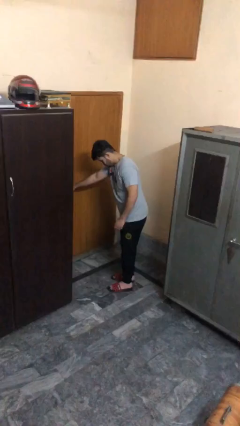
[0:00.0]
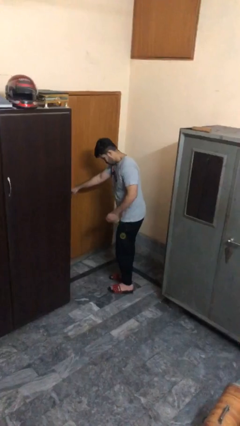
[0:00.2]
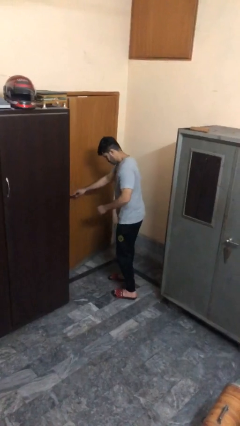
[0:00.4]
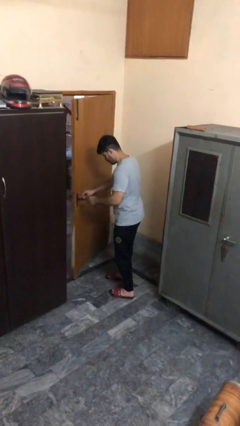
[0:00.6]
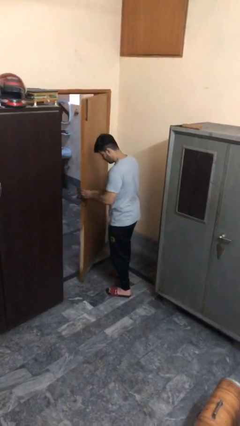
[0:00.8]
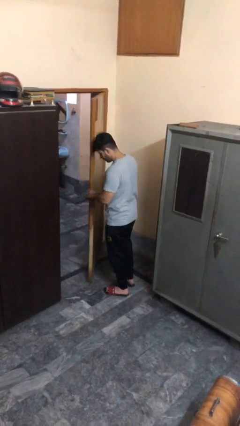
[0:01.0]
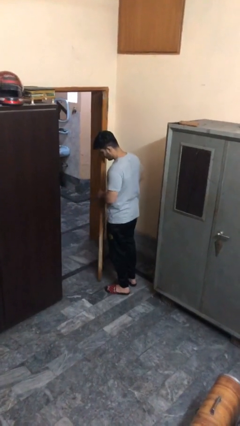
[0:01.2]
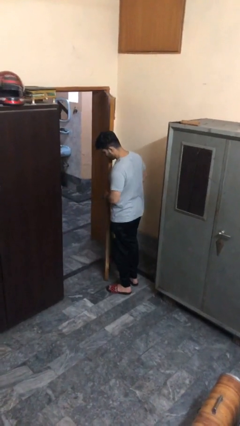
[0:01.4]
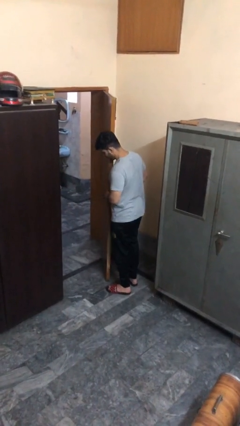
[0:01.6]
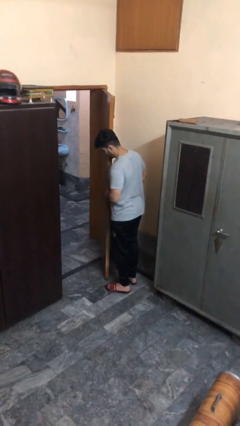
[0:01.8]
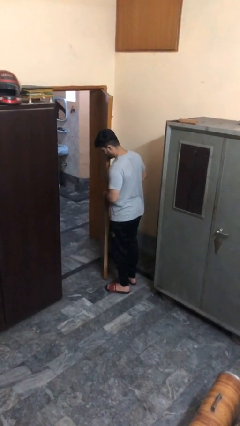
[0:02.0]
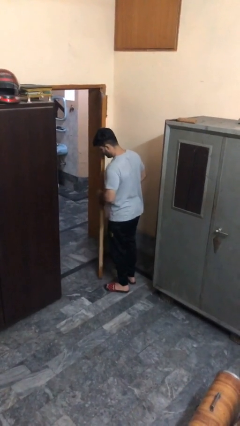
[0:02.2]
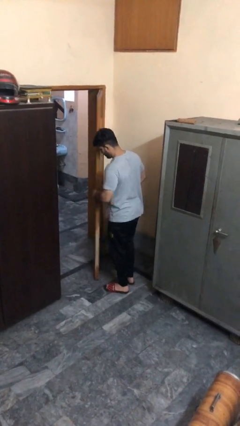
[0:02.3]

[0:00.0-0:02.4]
person opens facility door

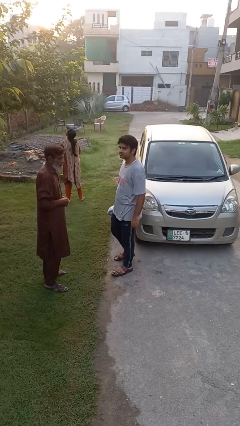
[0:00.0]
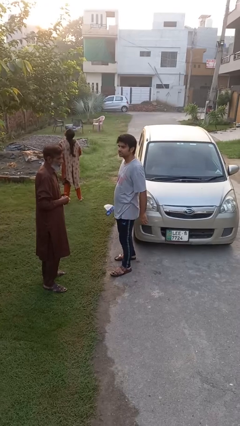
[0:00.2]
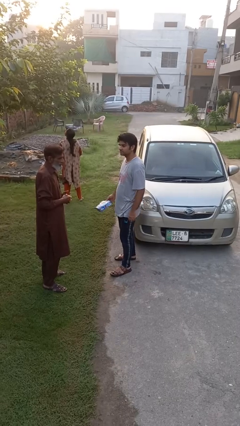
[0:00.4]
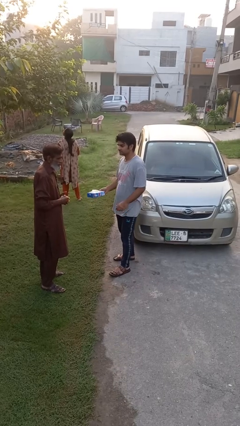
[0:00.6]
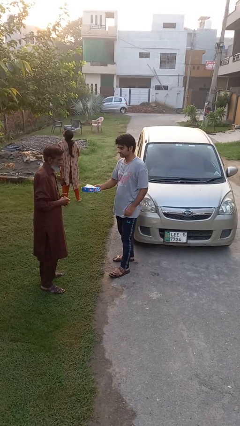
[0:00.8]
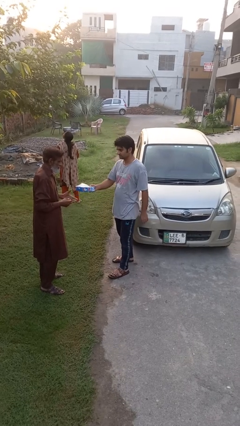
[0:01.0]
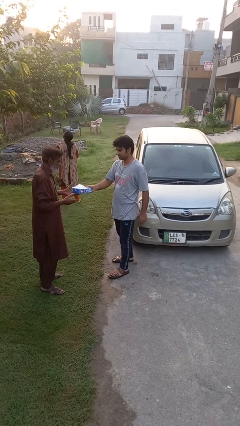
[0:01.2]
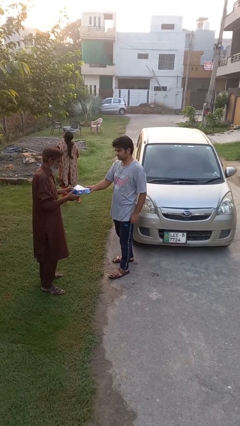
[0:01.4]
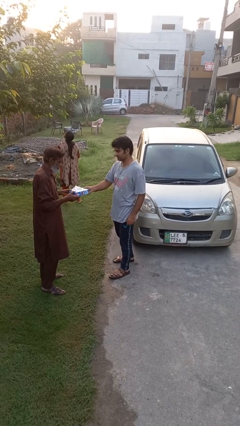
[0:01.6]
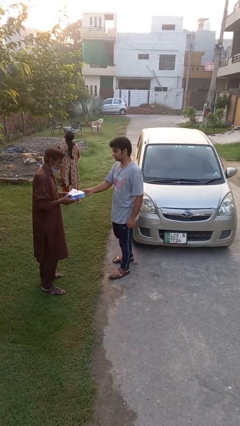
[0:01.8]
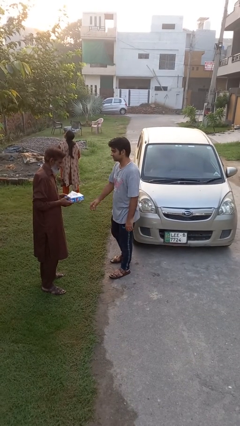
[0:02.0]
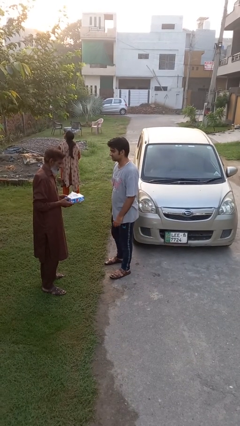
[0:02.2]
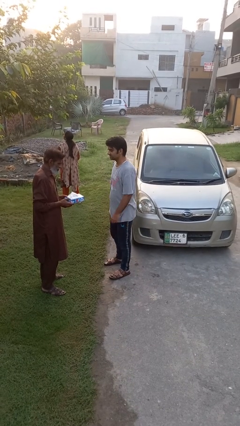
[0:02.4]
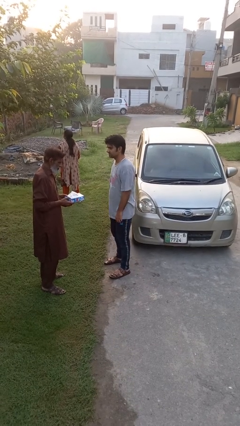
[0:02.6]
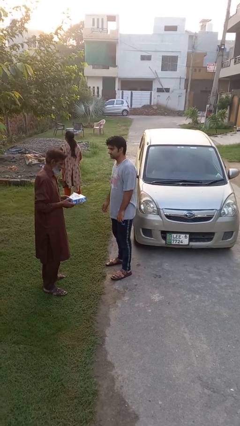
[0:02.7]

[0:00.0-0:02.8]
person transfers object to person

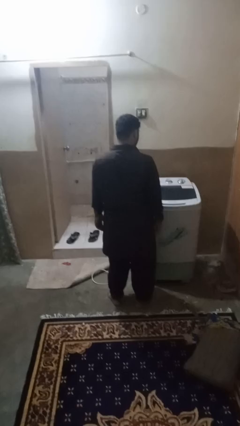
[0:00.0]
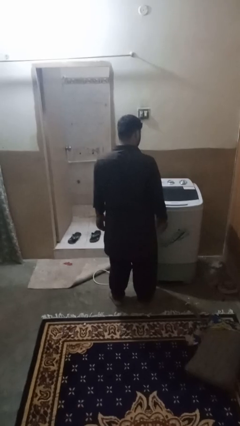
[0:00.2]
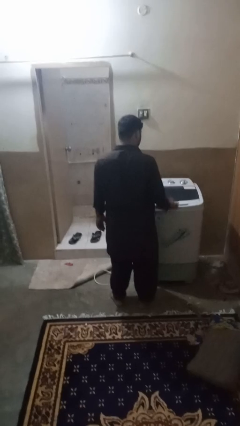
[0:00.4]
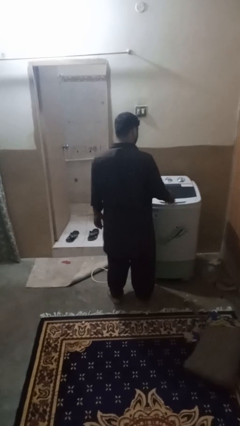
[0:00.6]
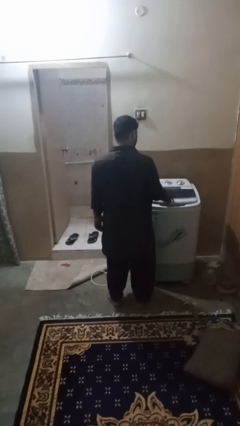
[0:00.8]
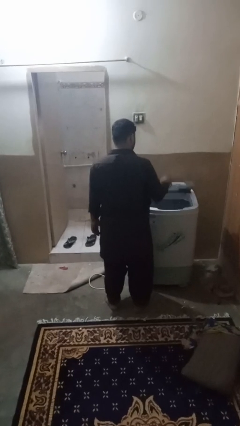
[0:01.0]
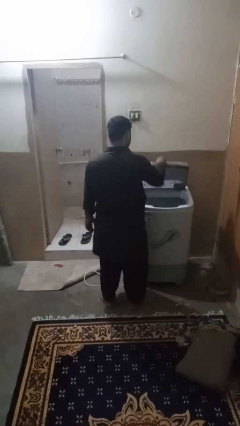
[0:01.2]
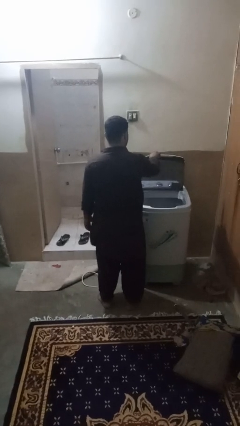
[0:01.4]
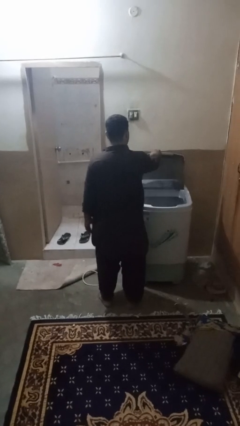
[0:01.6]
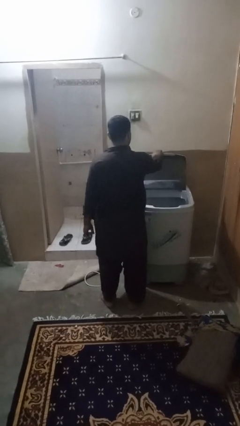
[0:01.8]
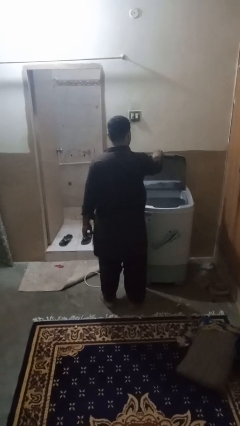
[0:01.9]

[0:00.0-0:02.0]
person opens clothes washer

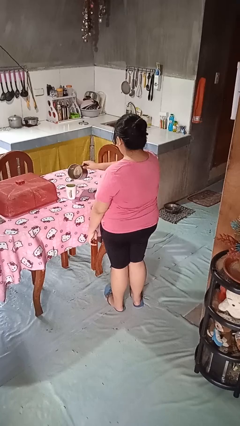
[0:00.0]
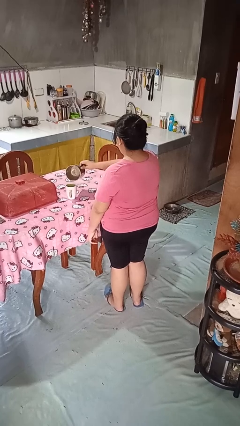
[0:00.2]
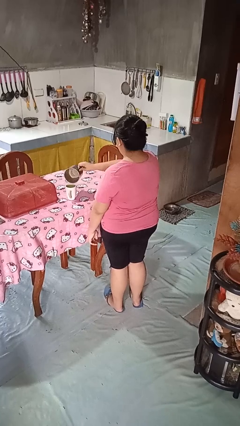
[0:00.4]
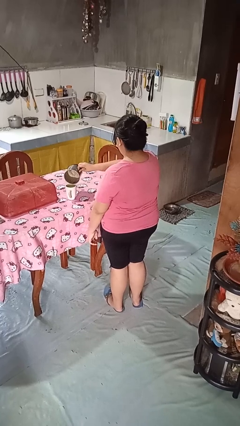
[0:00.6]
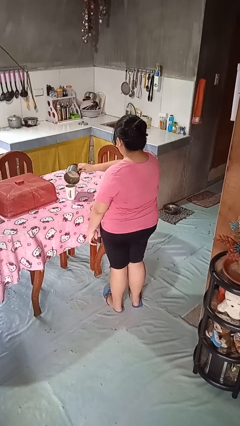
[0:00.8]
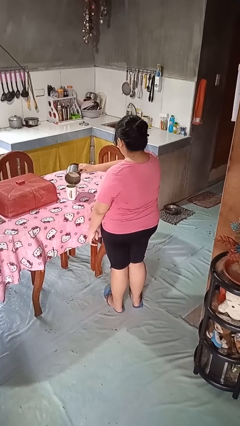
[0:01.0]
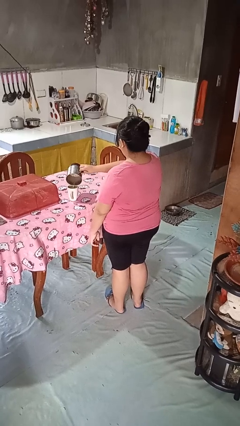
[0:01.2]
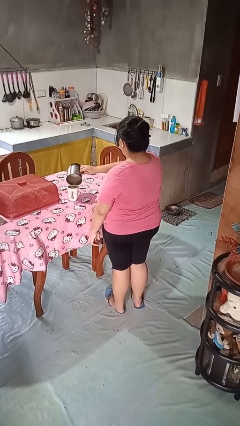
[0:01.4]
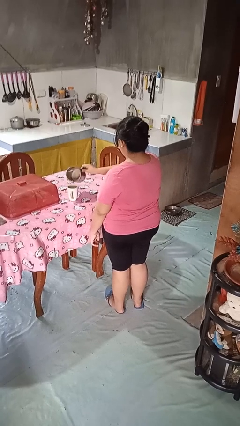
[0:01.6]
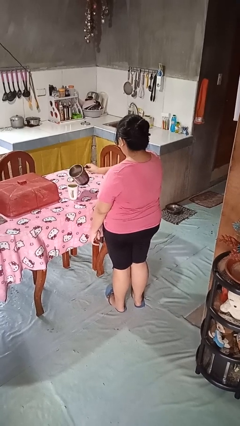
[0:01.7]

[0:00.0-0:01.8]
person pours coffee into mug

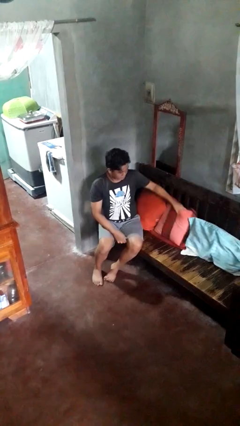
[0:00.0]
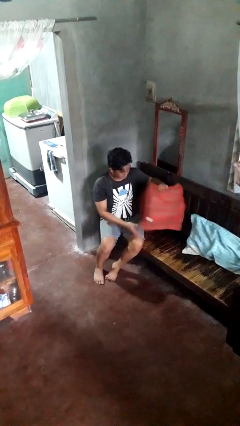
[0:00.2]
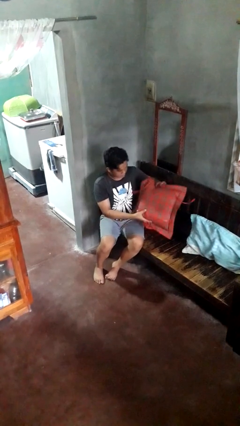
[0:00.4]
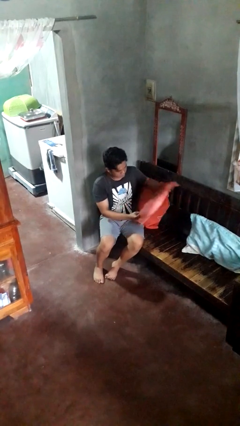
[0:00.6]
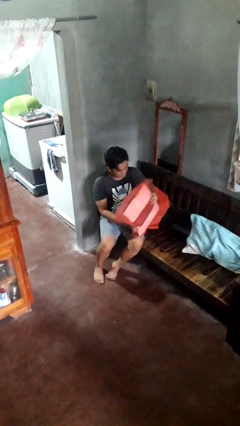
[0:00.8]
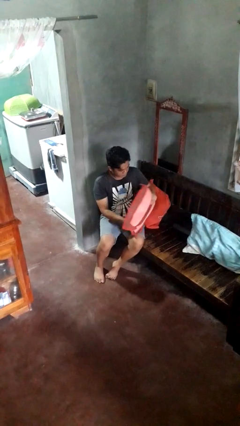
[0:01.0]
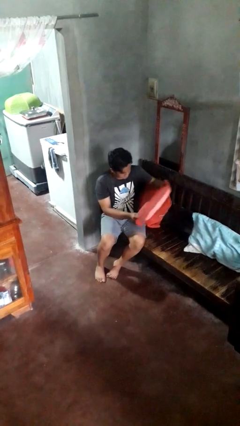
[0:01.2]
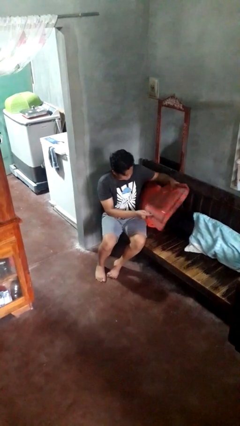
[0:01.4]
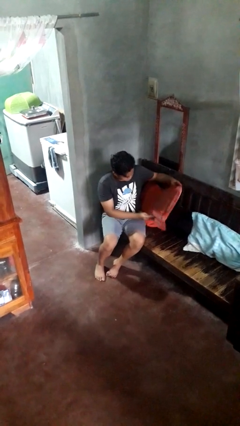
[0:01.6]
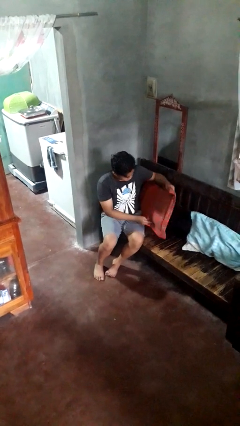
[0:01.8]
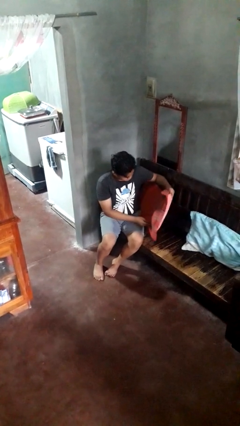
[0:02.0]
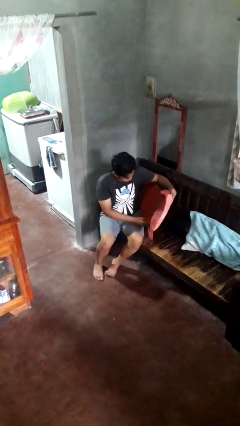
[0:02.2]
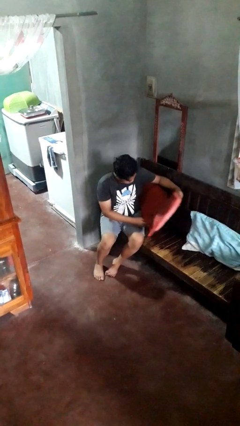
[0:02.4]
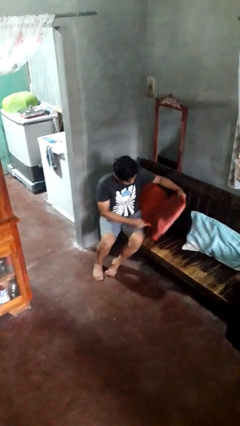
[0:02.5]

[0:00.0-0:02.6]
person searches in couch

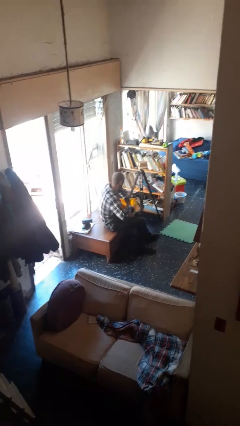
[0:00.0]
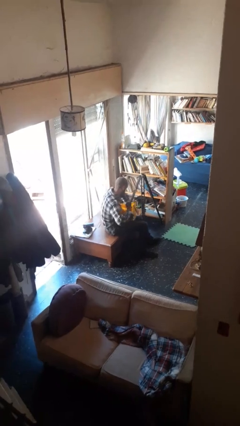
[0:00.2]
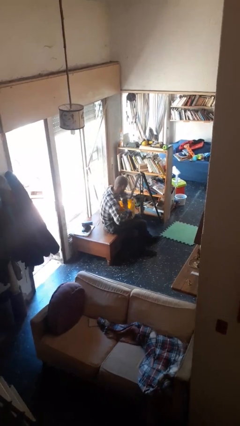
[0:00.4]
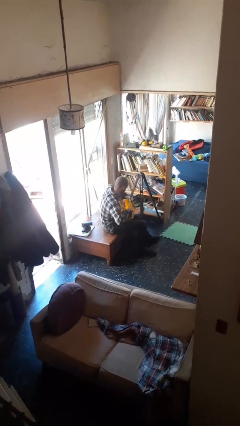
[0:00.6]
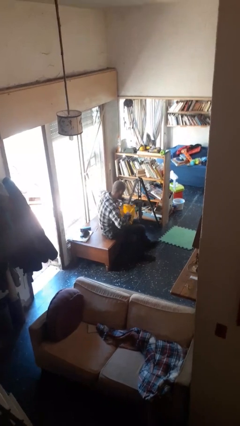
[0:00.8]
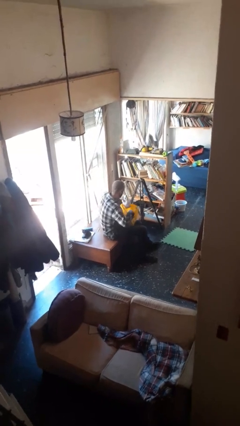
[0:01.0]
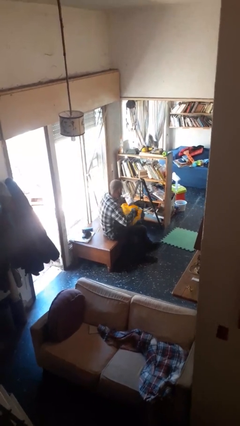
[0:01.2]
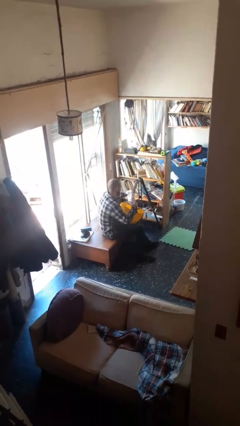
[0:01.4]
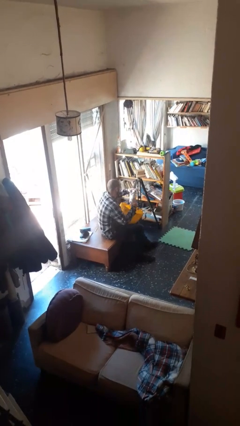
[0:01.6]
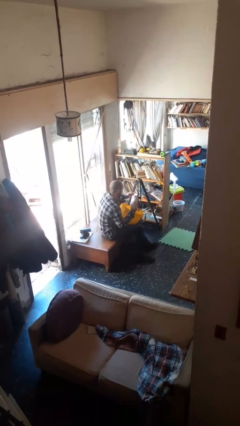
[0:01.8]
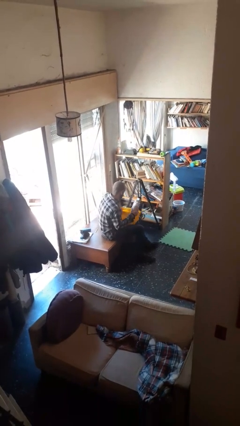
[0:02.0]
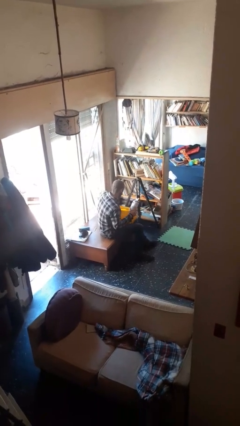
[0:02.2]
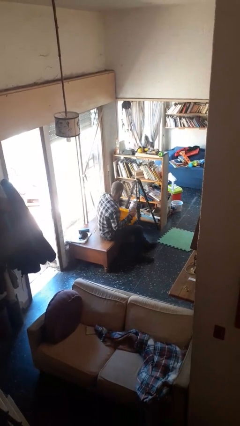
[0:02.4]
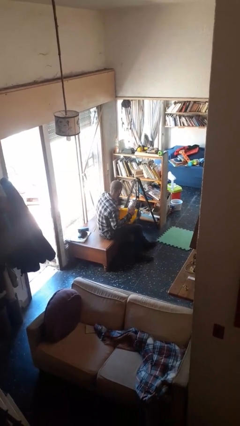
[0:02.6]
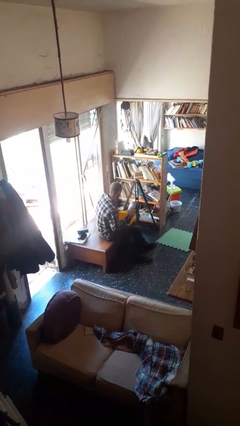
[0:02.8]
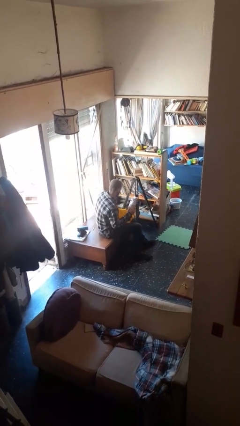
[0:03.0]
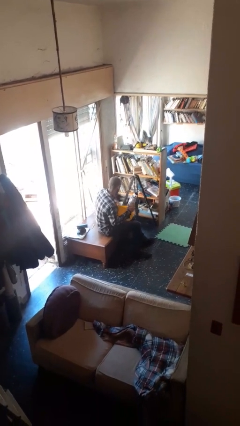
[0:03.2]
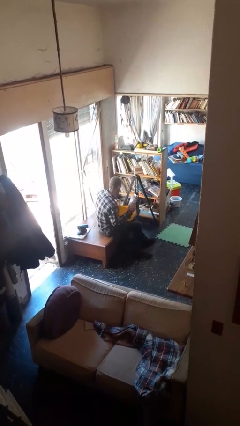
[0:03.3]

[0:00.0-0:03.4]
person takes object from bag

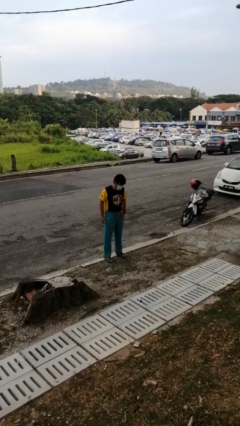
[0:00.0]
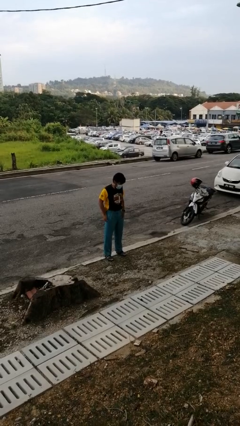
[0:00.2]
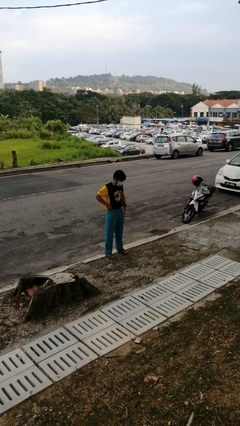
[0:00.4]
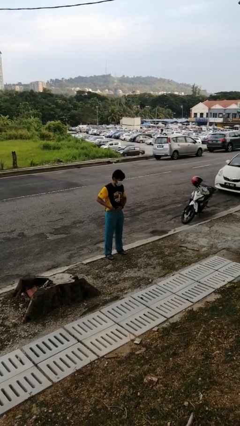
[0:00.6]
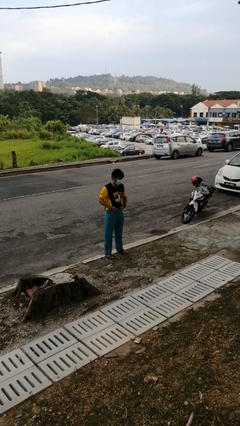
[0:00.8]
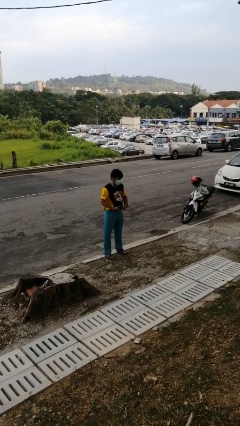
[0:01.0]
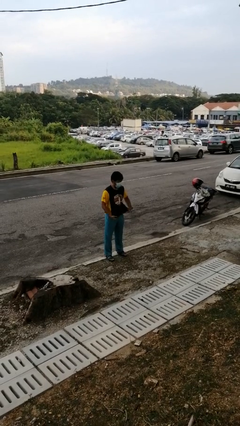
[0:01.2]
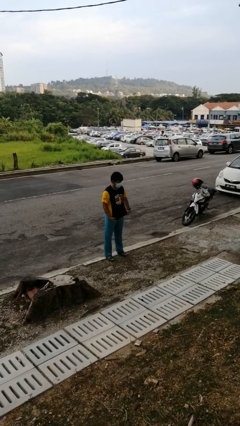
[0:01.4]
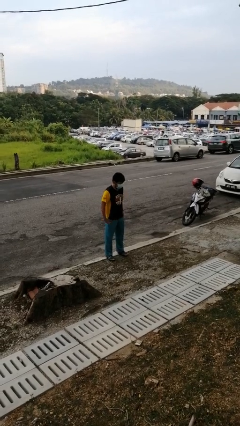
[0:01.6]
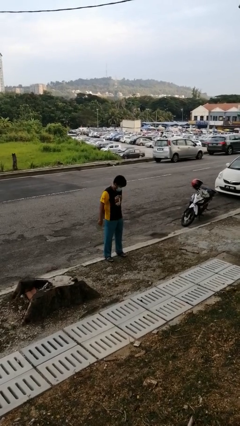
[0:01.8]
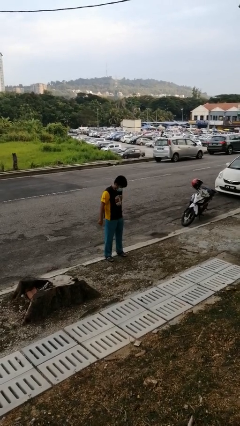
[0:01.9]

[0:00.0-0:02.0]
person untucks shirt
